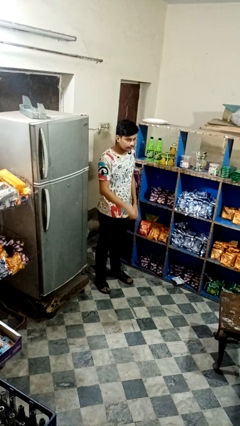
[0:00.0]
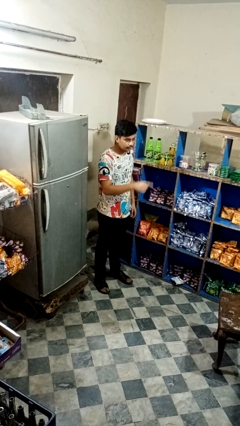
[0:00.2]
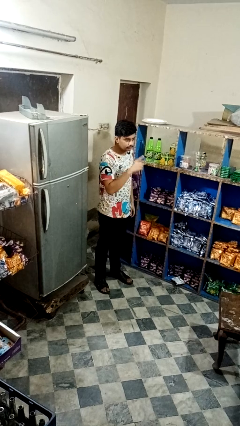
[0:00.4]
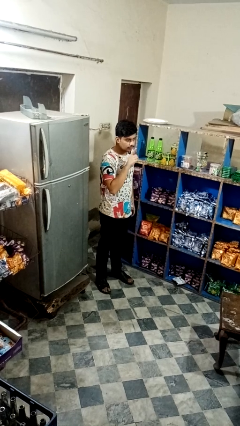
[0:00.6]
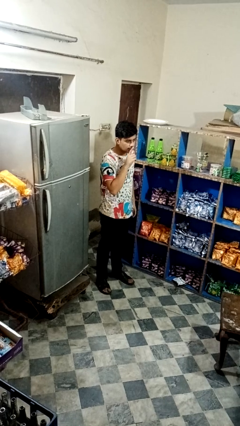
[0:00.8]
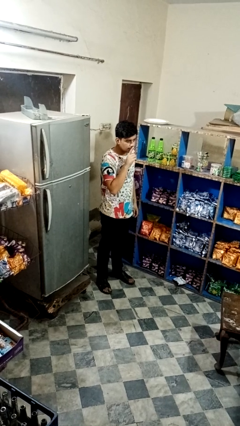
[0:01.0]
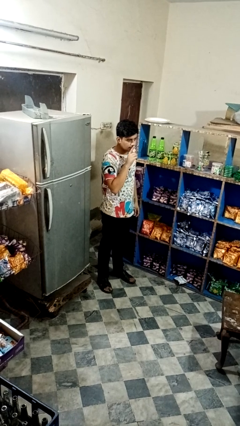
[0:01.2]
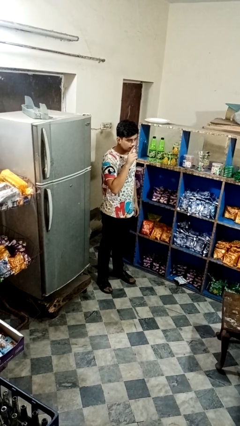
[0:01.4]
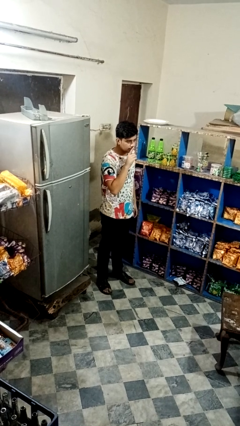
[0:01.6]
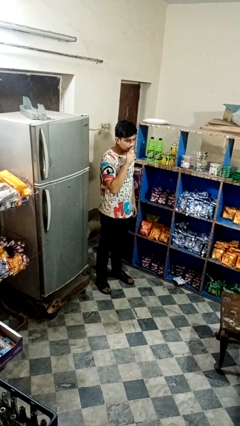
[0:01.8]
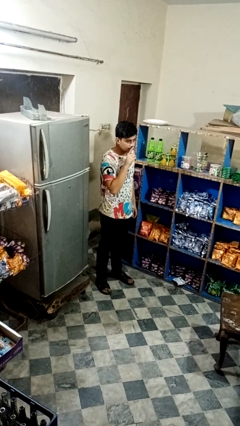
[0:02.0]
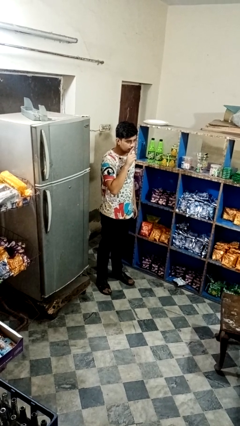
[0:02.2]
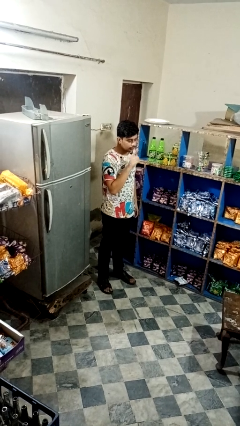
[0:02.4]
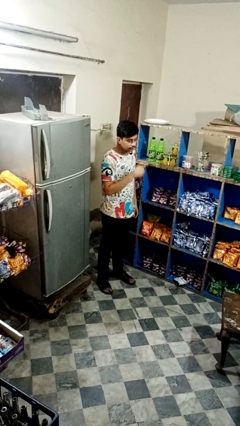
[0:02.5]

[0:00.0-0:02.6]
person gestures be quiet

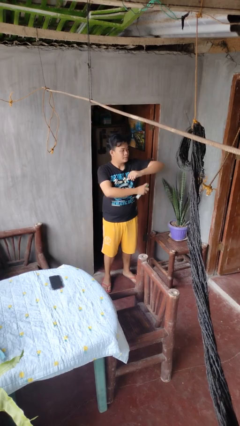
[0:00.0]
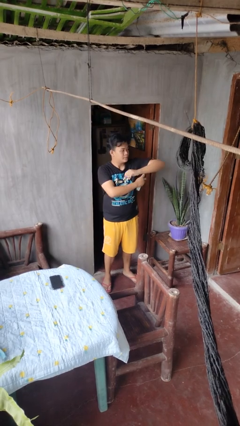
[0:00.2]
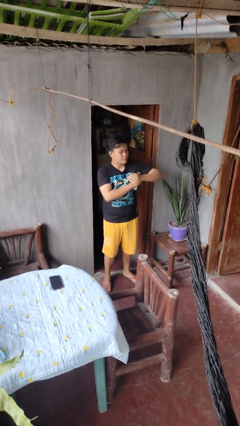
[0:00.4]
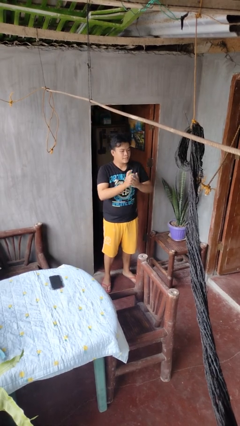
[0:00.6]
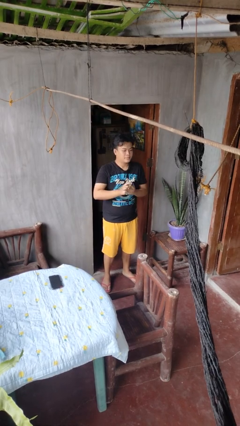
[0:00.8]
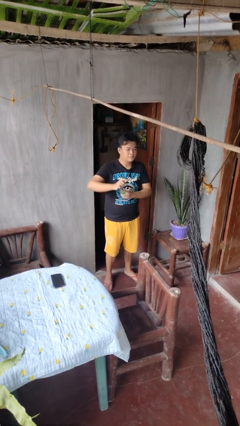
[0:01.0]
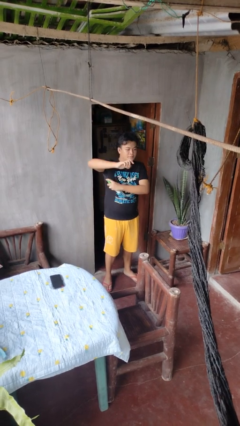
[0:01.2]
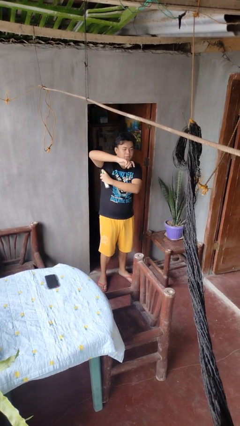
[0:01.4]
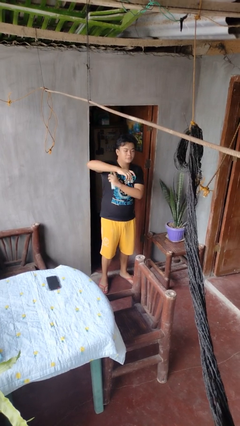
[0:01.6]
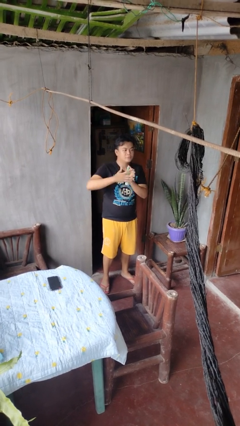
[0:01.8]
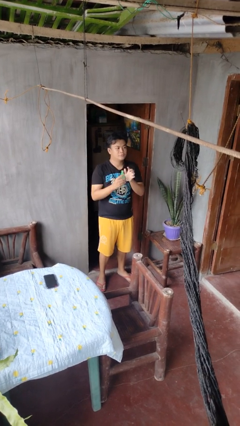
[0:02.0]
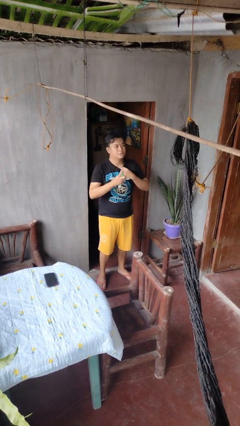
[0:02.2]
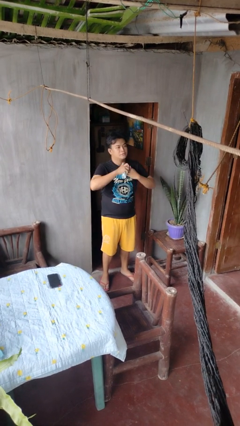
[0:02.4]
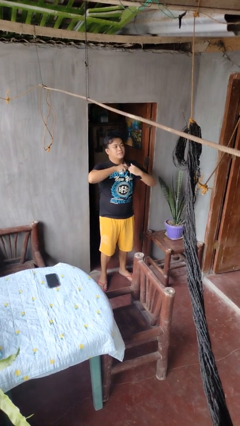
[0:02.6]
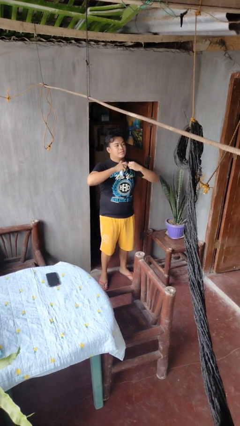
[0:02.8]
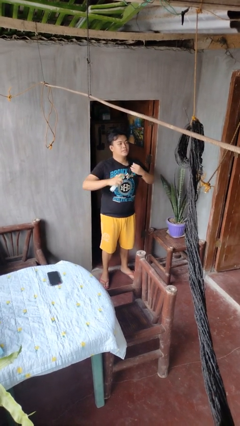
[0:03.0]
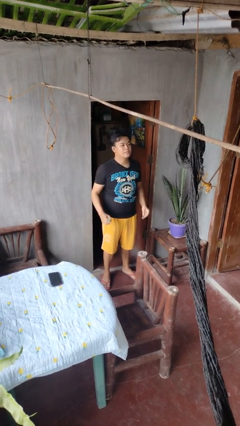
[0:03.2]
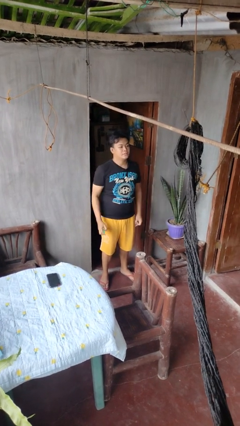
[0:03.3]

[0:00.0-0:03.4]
person applies deodorant

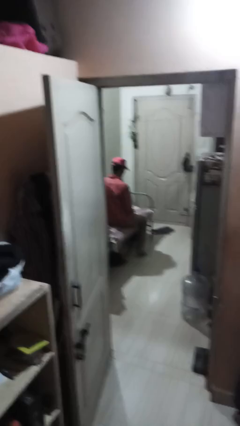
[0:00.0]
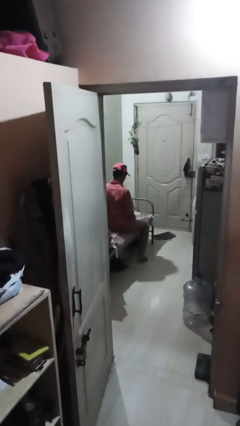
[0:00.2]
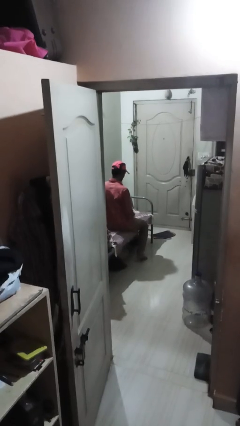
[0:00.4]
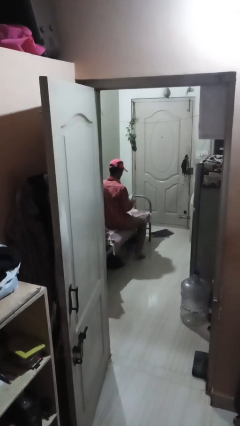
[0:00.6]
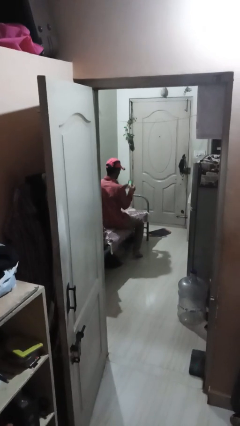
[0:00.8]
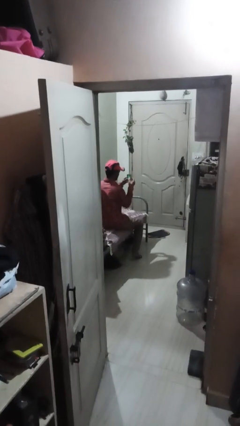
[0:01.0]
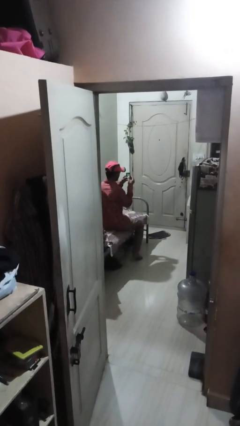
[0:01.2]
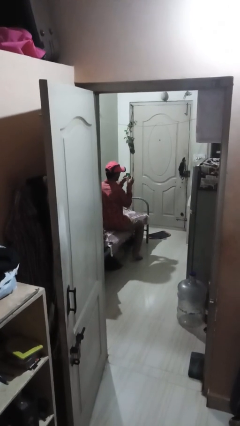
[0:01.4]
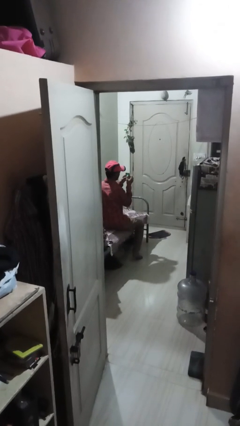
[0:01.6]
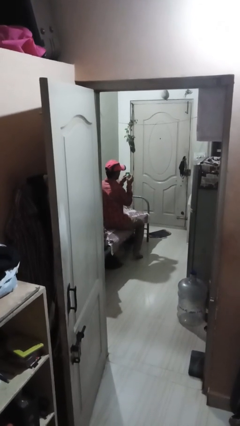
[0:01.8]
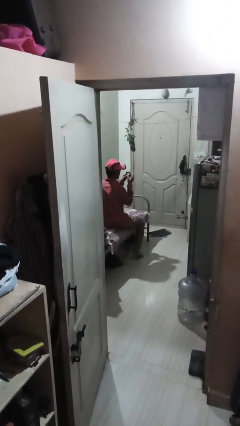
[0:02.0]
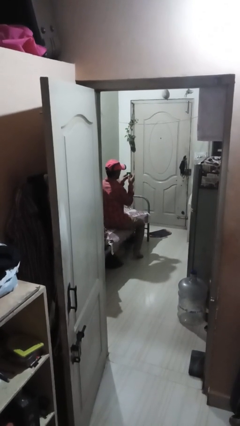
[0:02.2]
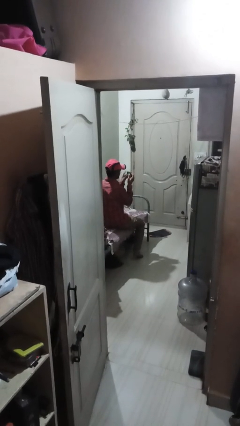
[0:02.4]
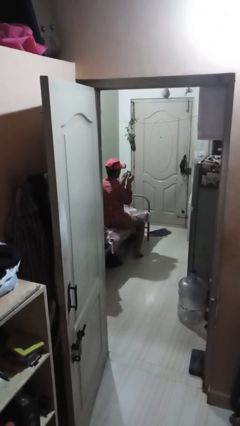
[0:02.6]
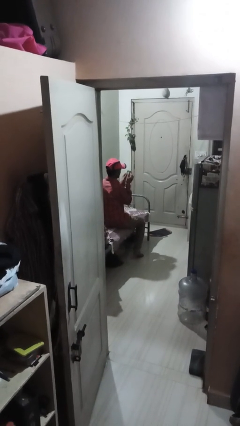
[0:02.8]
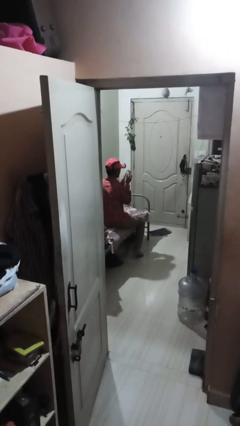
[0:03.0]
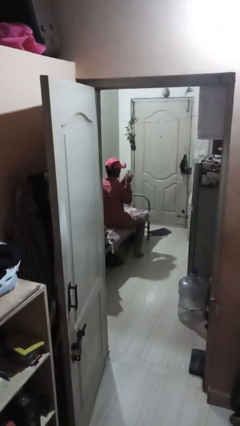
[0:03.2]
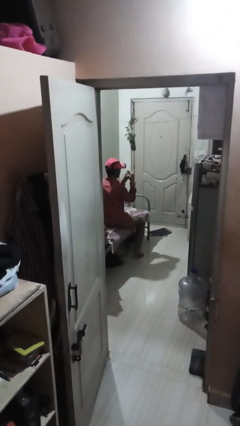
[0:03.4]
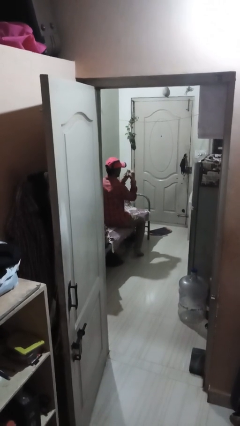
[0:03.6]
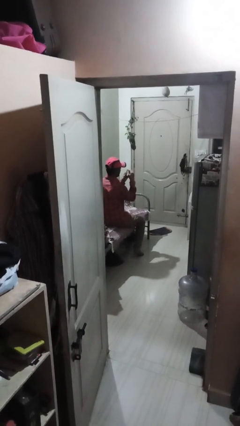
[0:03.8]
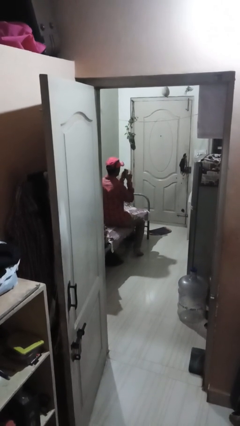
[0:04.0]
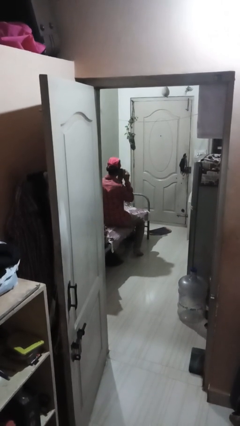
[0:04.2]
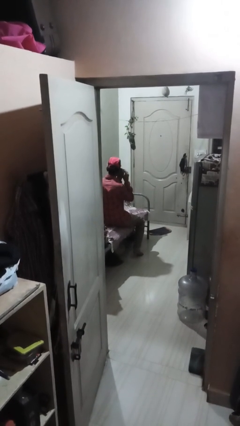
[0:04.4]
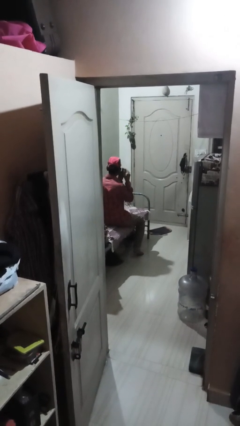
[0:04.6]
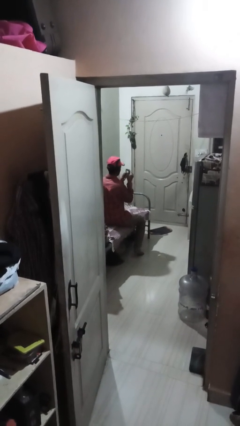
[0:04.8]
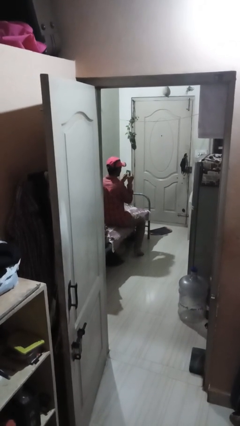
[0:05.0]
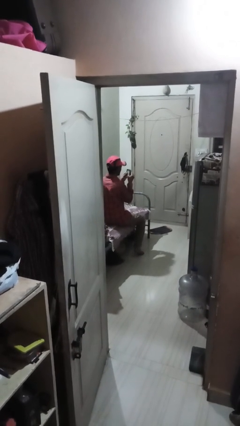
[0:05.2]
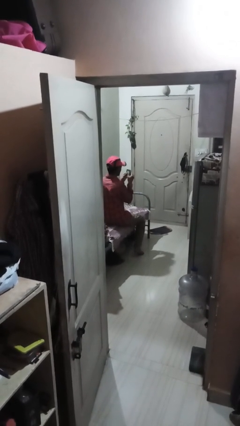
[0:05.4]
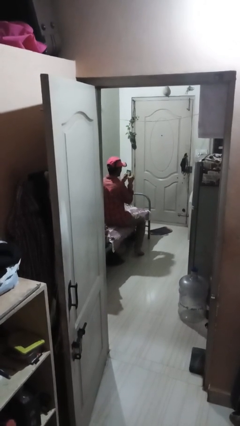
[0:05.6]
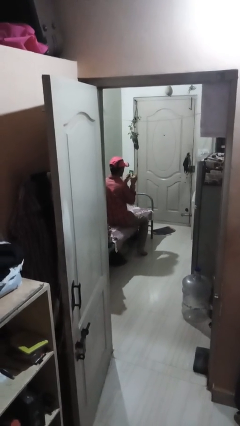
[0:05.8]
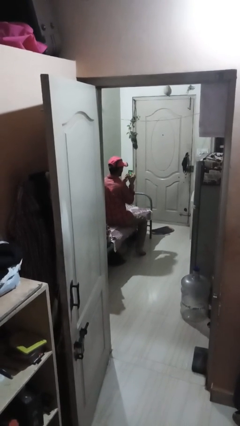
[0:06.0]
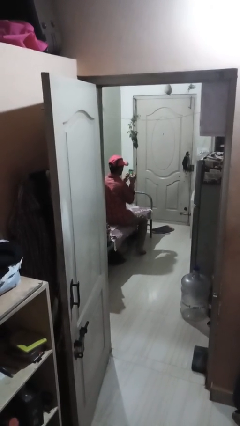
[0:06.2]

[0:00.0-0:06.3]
person taps object with finger

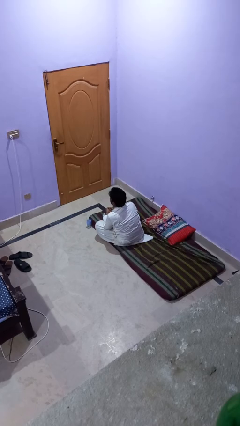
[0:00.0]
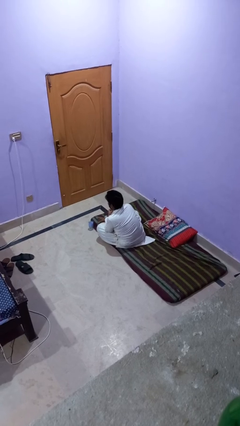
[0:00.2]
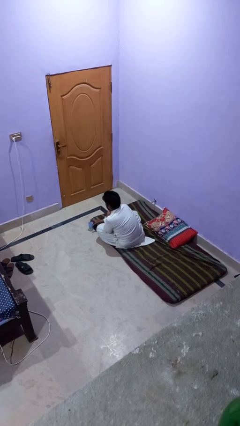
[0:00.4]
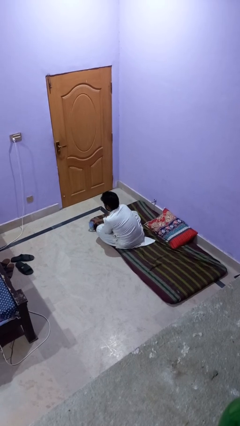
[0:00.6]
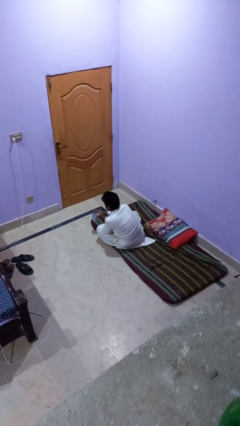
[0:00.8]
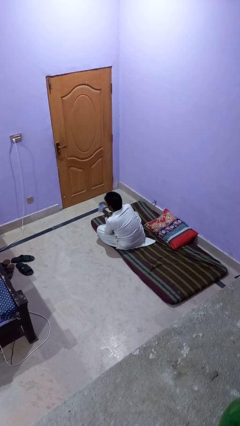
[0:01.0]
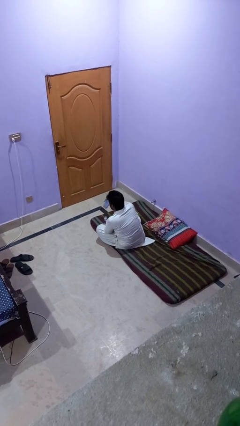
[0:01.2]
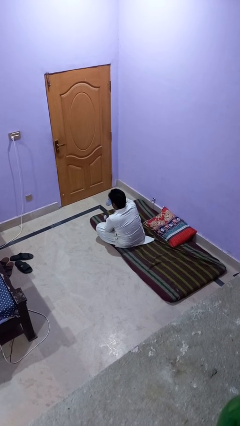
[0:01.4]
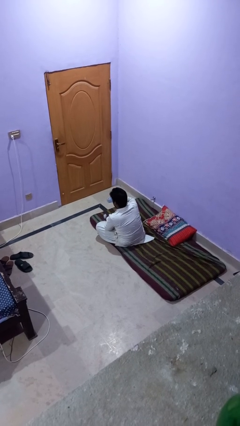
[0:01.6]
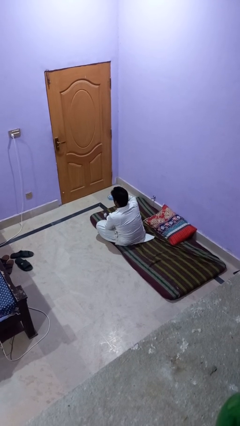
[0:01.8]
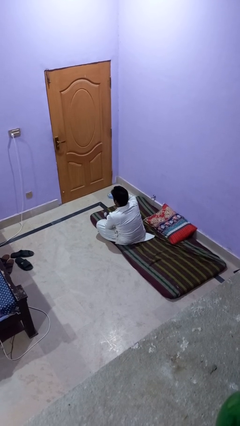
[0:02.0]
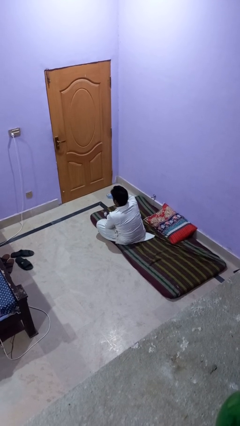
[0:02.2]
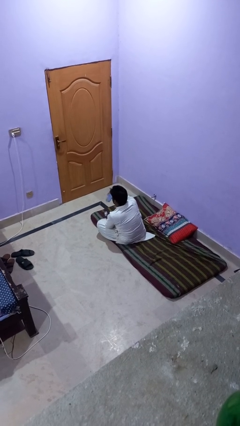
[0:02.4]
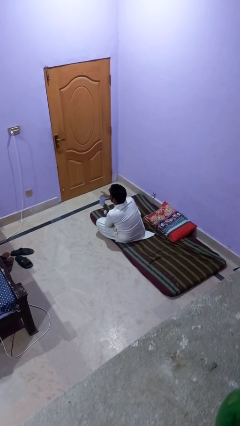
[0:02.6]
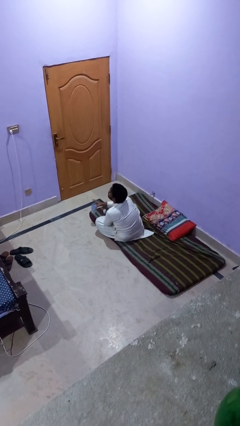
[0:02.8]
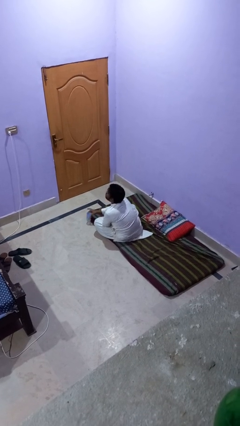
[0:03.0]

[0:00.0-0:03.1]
person drinks from cup

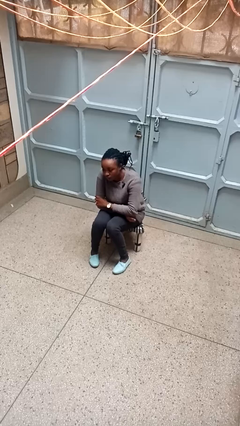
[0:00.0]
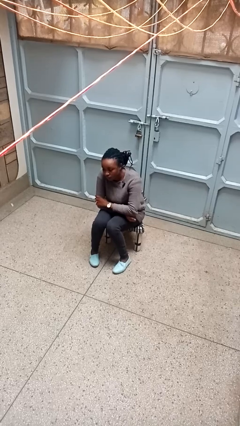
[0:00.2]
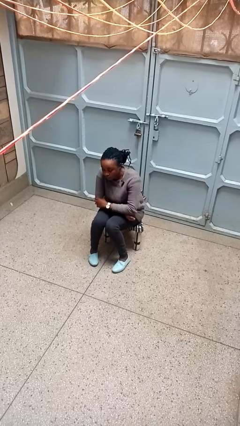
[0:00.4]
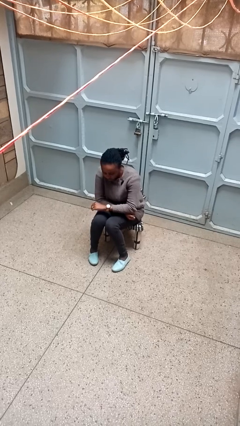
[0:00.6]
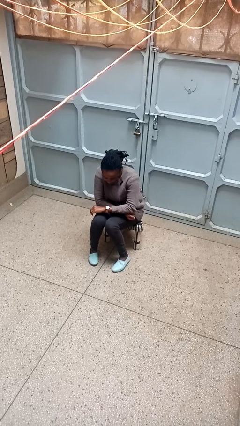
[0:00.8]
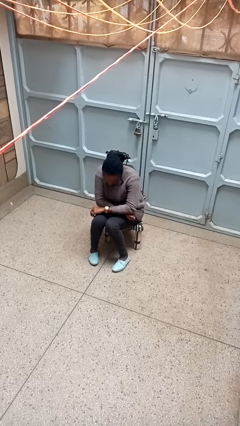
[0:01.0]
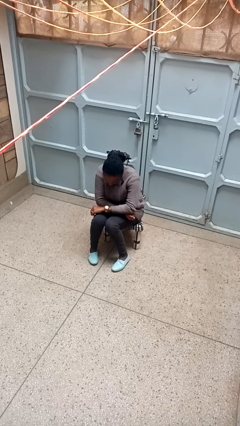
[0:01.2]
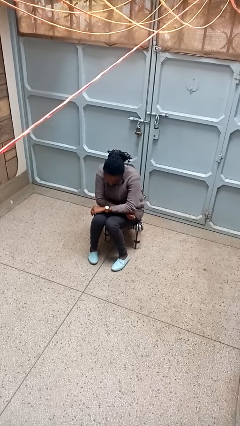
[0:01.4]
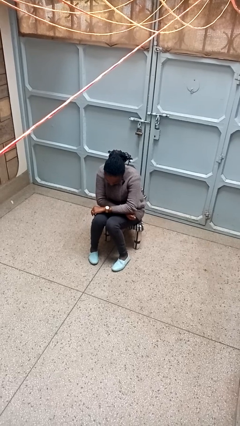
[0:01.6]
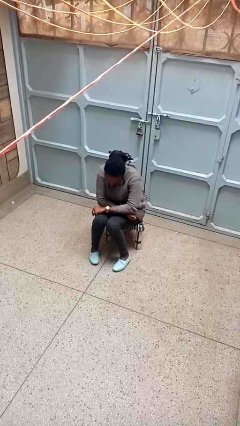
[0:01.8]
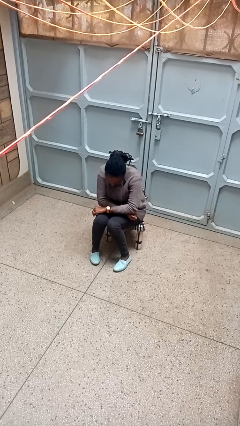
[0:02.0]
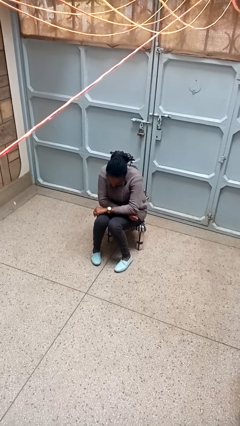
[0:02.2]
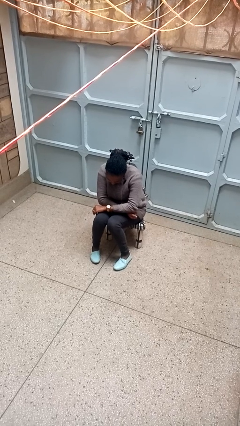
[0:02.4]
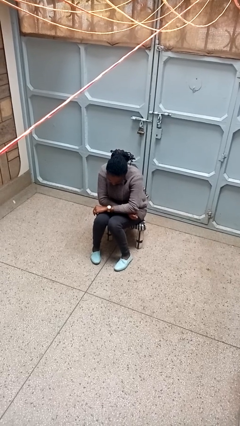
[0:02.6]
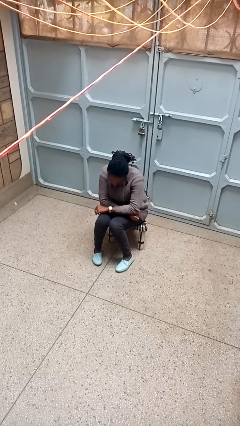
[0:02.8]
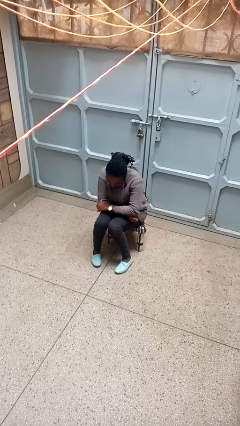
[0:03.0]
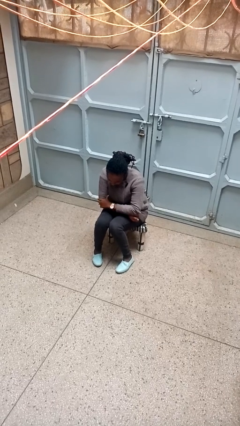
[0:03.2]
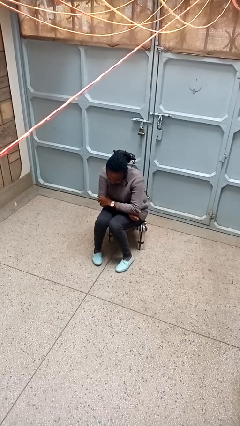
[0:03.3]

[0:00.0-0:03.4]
person looks at wristwatch
